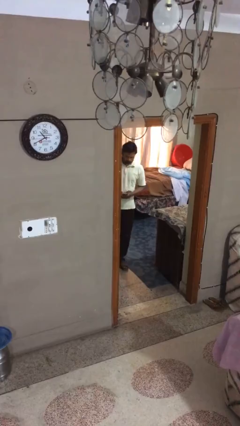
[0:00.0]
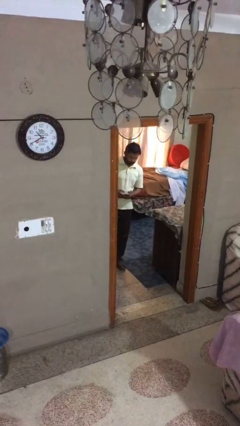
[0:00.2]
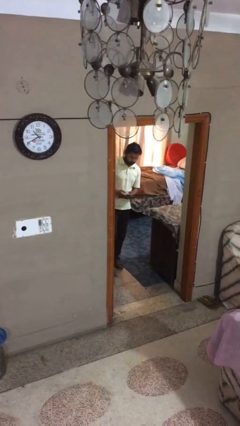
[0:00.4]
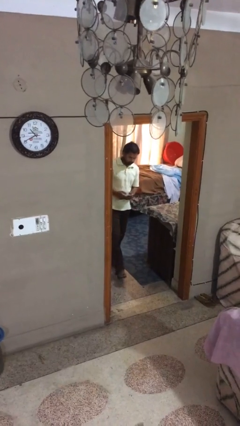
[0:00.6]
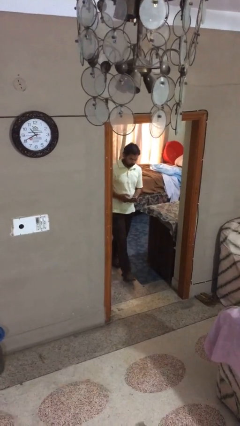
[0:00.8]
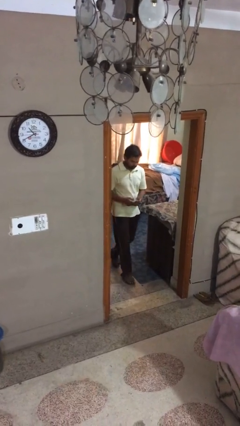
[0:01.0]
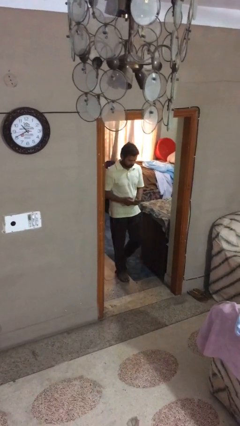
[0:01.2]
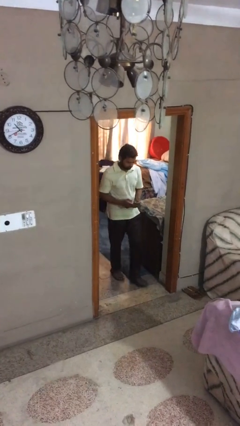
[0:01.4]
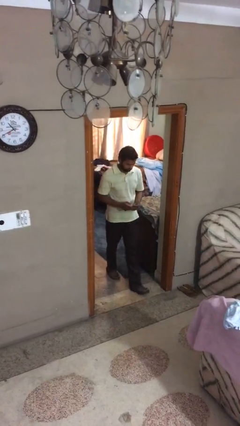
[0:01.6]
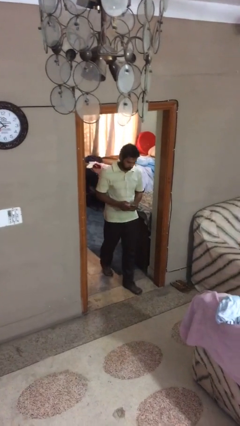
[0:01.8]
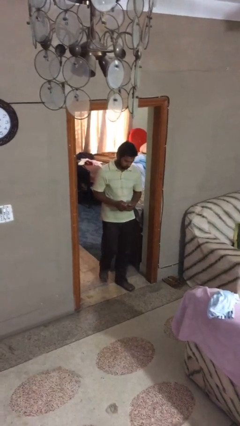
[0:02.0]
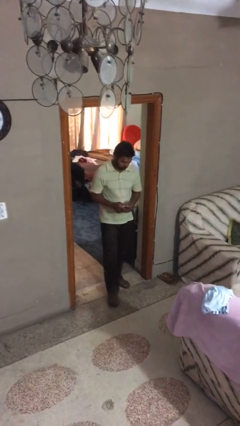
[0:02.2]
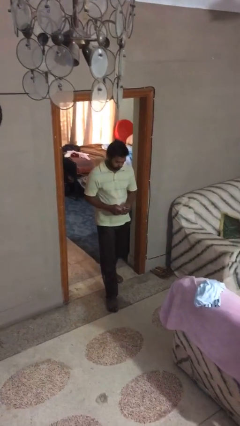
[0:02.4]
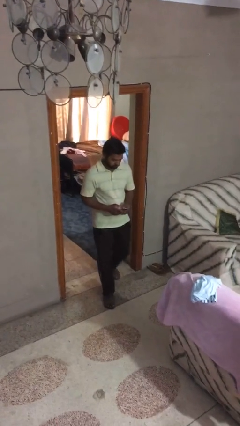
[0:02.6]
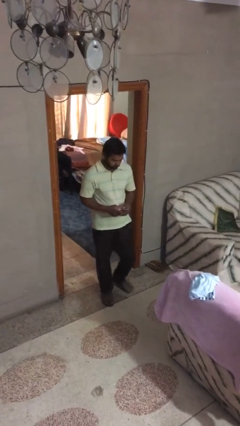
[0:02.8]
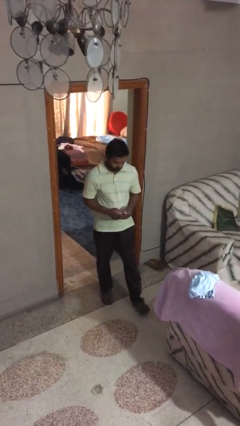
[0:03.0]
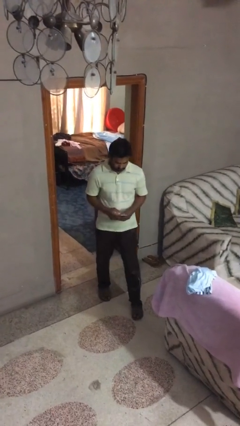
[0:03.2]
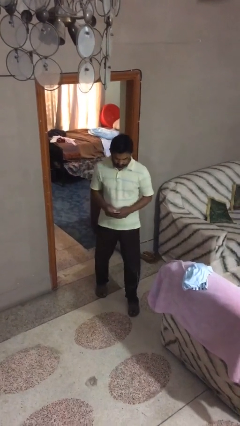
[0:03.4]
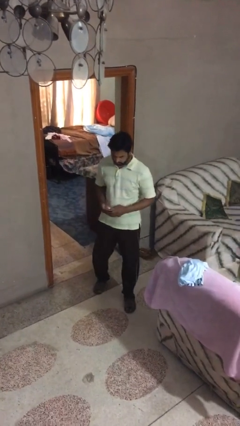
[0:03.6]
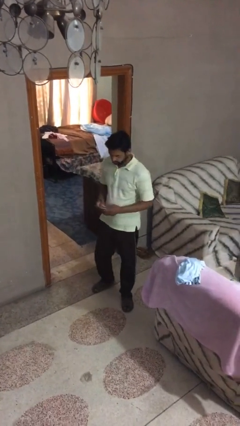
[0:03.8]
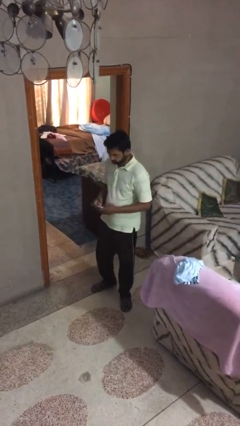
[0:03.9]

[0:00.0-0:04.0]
person enters scene through structure

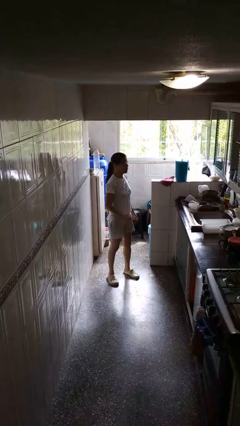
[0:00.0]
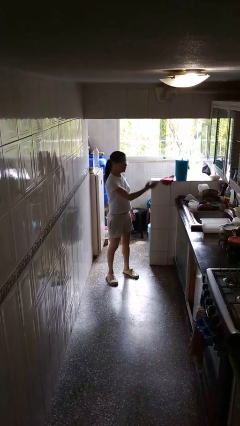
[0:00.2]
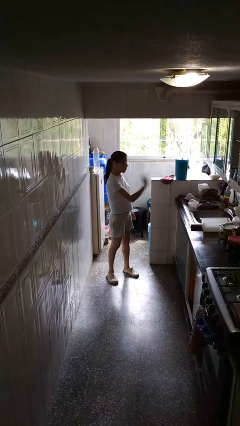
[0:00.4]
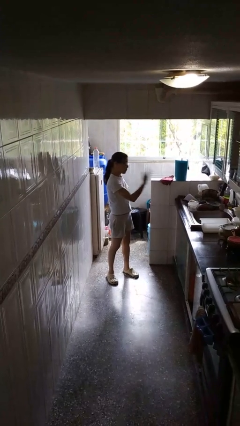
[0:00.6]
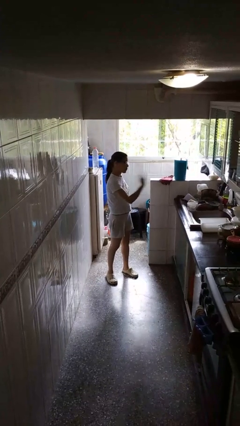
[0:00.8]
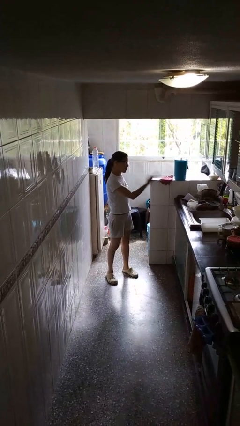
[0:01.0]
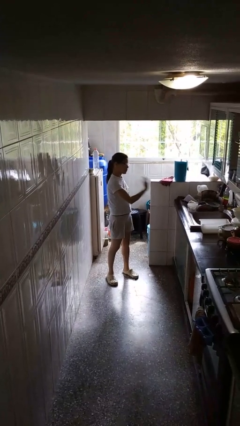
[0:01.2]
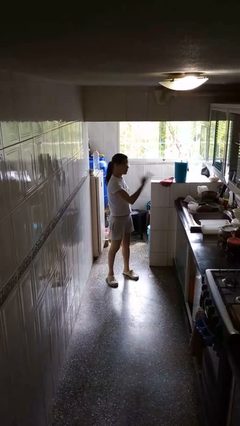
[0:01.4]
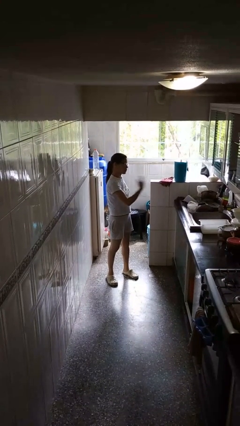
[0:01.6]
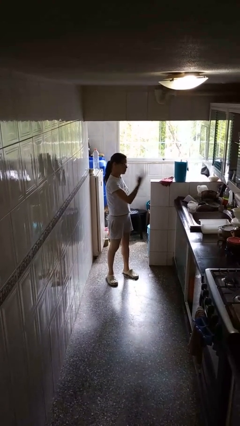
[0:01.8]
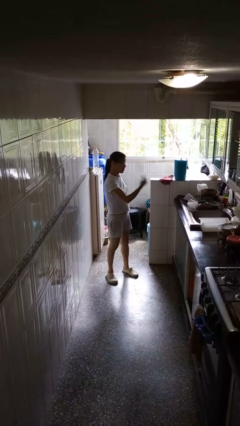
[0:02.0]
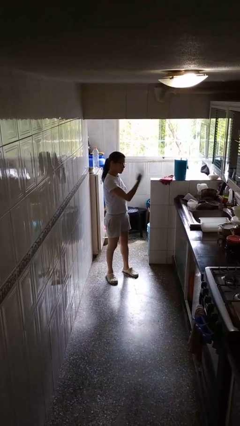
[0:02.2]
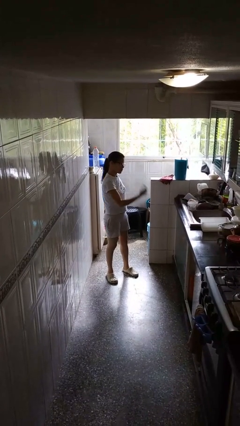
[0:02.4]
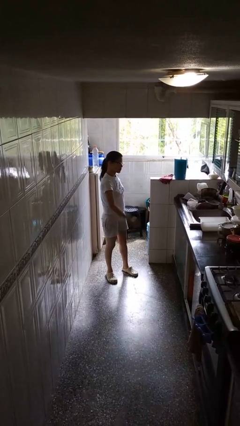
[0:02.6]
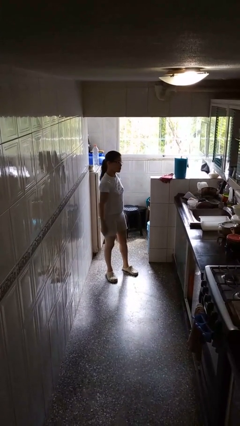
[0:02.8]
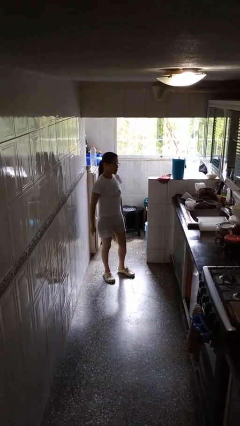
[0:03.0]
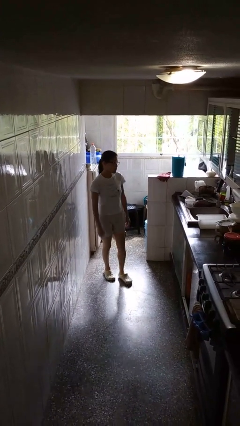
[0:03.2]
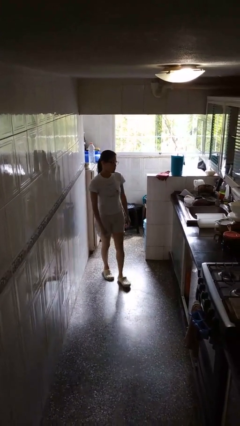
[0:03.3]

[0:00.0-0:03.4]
person gestures come here

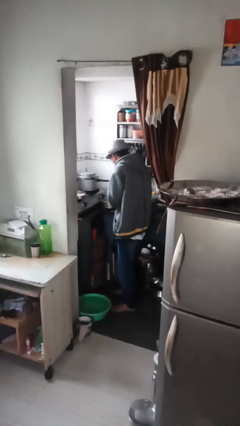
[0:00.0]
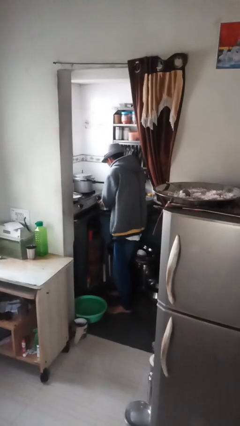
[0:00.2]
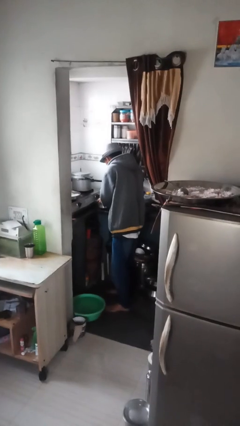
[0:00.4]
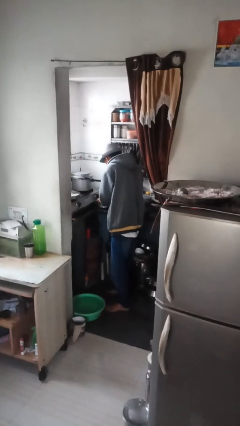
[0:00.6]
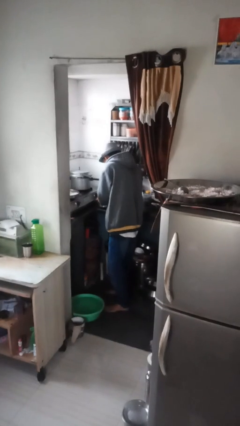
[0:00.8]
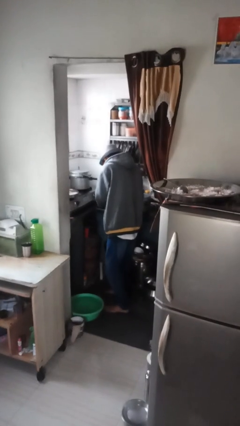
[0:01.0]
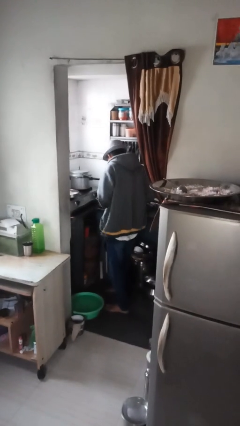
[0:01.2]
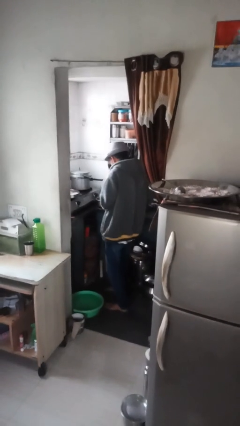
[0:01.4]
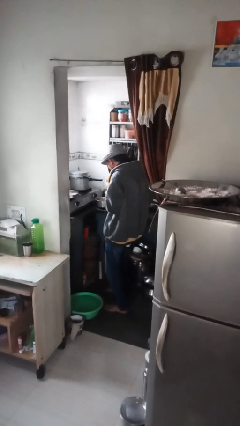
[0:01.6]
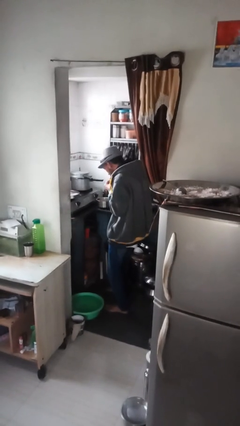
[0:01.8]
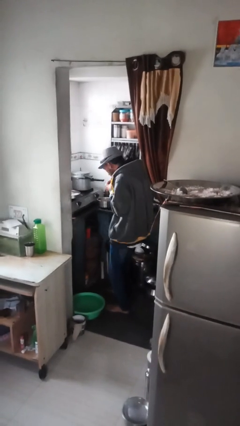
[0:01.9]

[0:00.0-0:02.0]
person burns hand

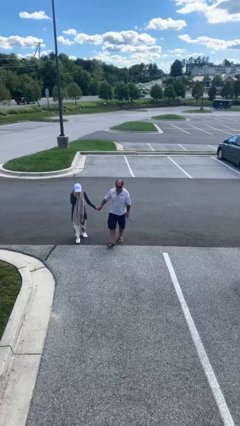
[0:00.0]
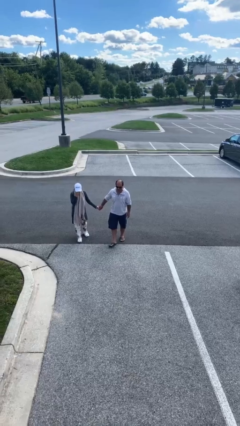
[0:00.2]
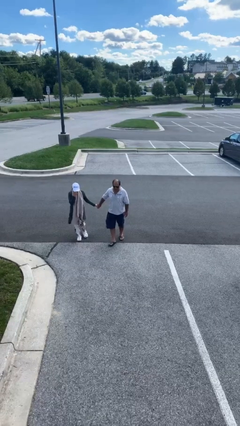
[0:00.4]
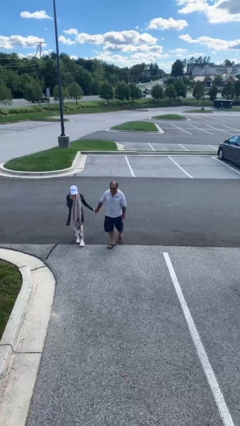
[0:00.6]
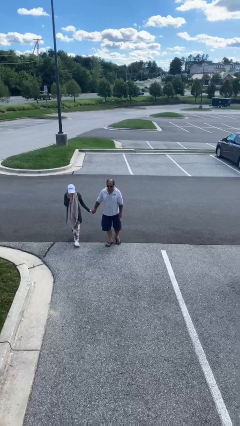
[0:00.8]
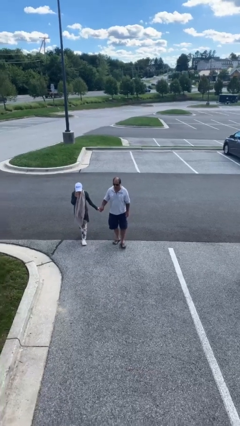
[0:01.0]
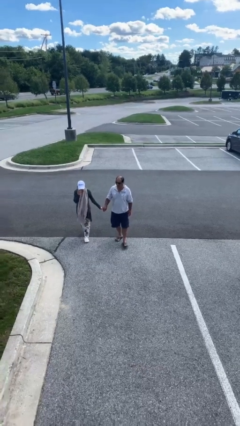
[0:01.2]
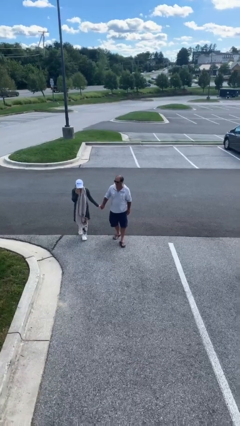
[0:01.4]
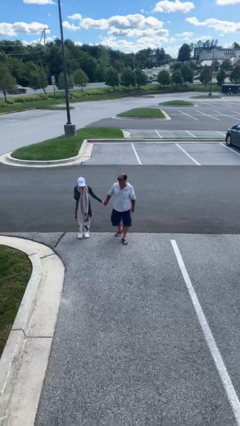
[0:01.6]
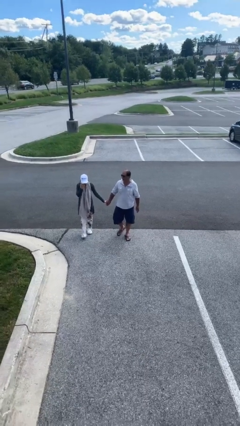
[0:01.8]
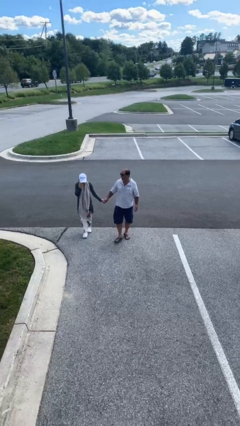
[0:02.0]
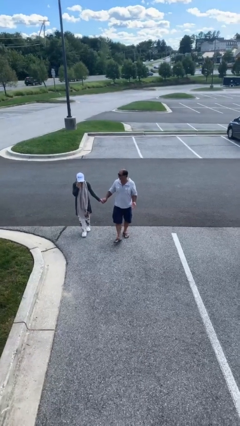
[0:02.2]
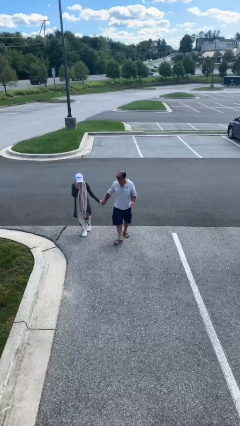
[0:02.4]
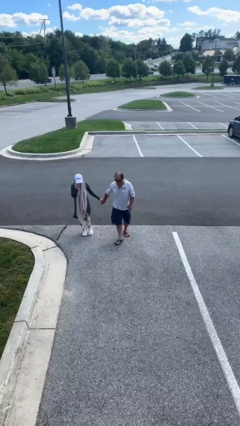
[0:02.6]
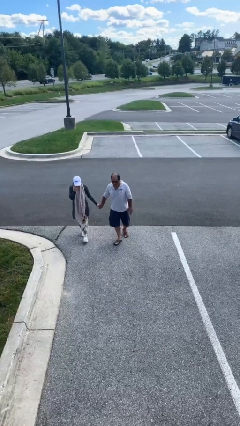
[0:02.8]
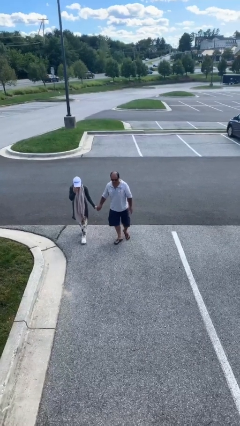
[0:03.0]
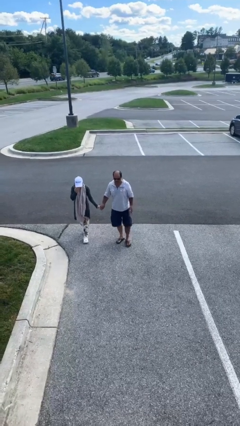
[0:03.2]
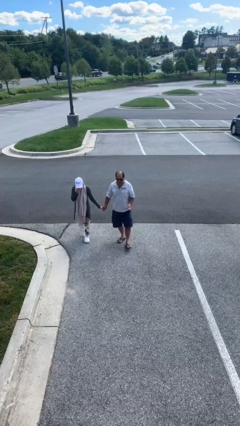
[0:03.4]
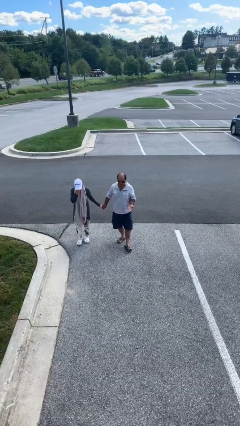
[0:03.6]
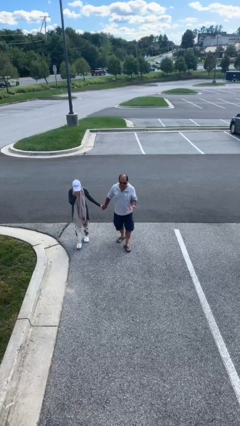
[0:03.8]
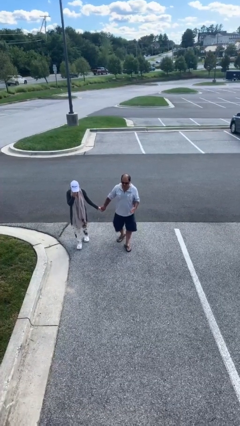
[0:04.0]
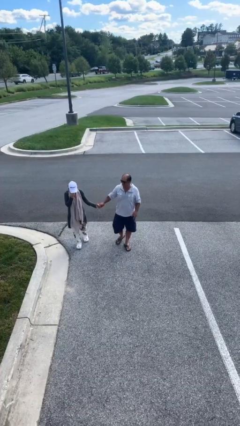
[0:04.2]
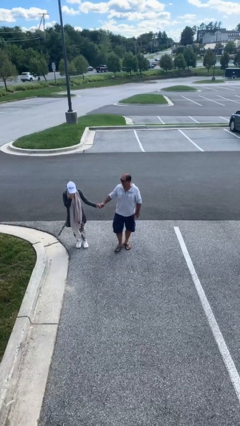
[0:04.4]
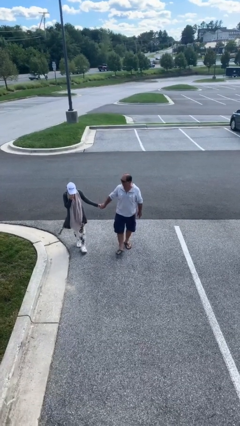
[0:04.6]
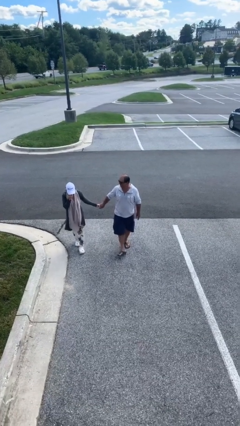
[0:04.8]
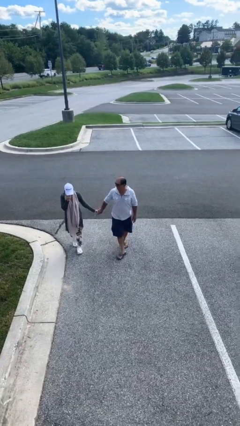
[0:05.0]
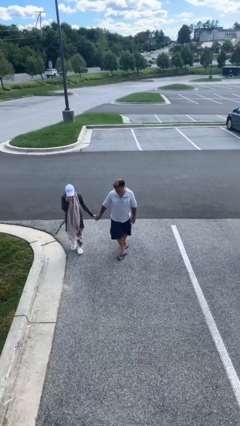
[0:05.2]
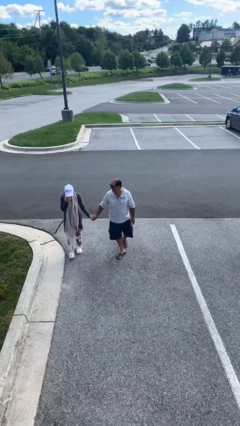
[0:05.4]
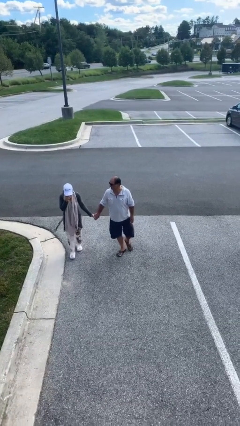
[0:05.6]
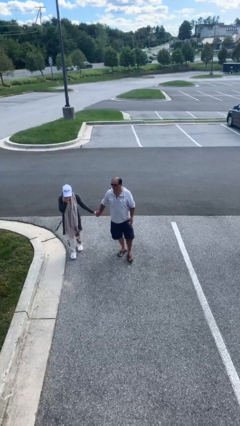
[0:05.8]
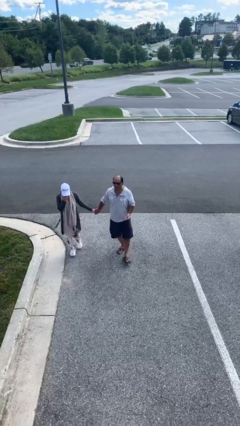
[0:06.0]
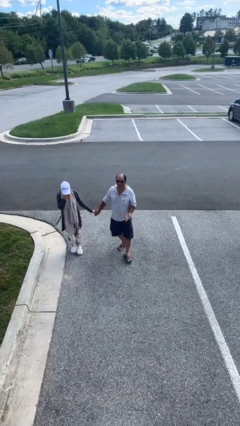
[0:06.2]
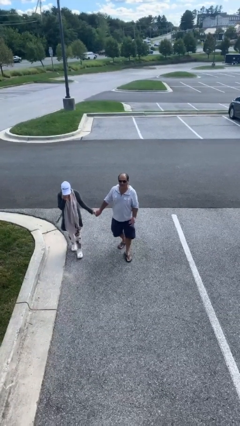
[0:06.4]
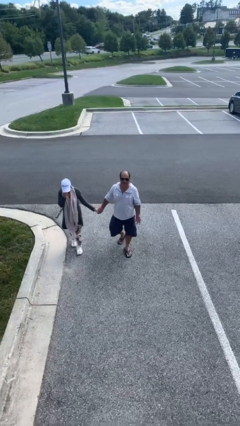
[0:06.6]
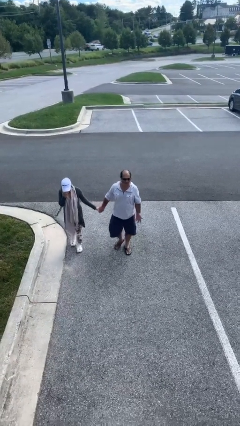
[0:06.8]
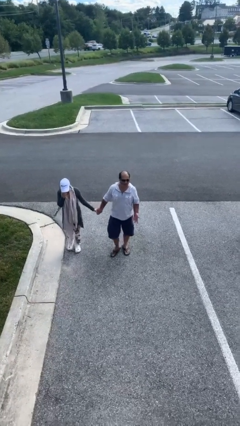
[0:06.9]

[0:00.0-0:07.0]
person holds hand

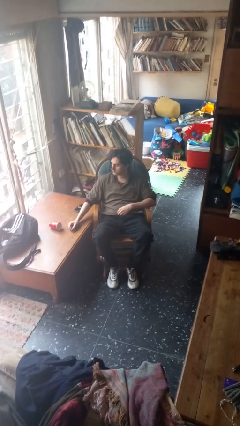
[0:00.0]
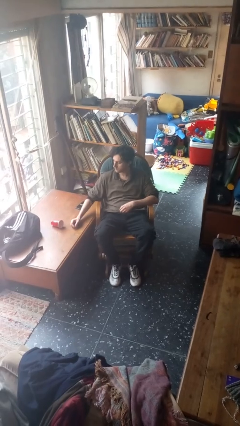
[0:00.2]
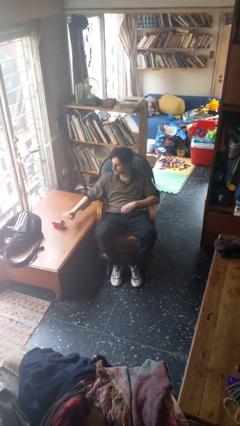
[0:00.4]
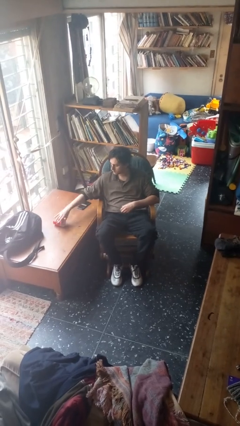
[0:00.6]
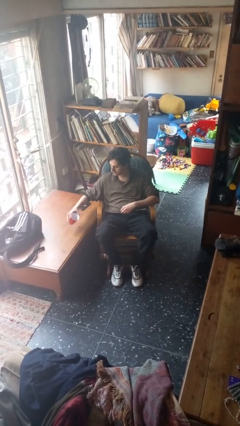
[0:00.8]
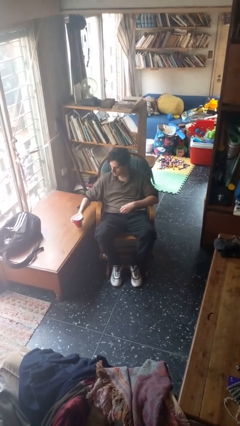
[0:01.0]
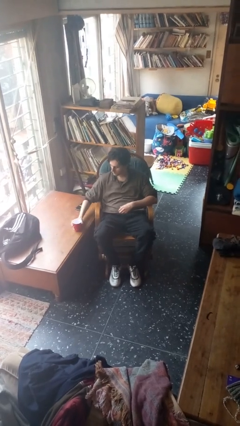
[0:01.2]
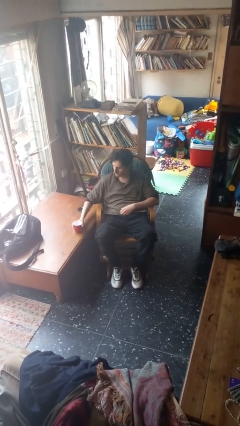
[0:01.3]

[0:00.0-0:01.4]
person sets upright glass
